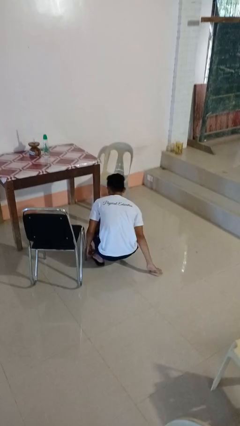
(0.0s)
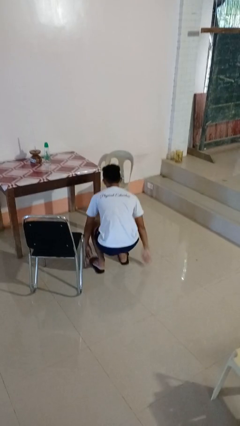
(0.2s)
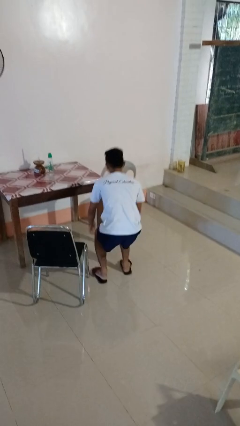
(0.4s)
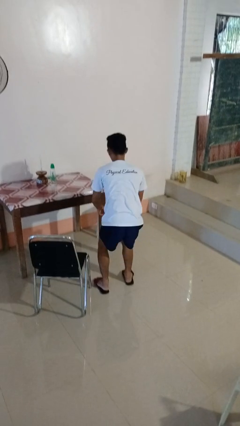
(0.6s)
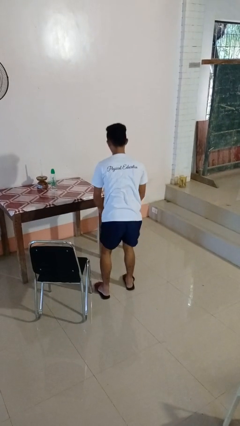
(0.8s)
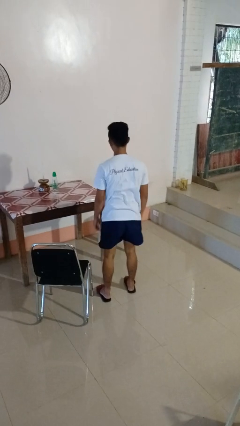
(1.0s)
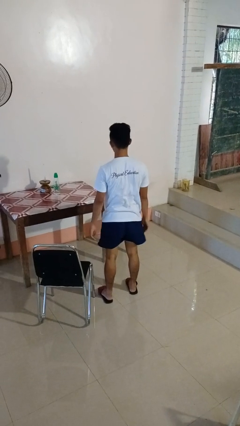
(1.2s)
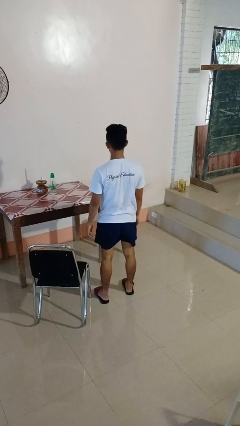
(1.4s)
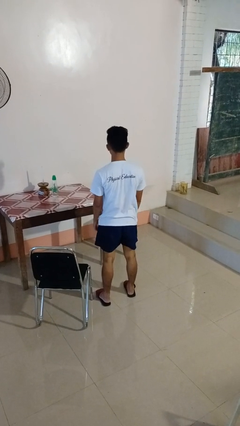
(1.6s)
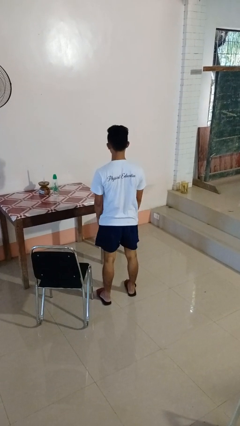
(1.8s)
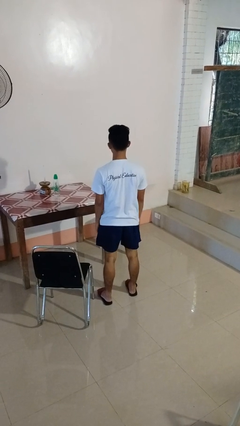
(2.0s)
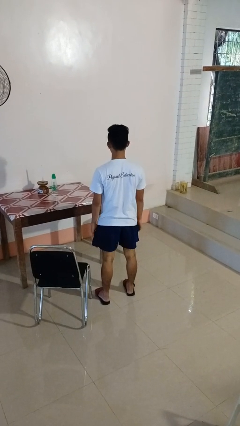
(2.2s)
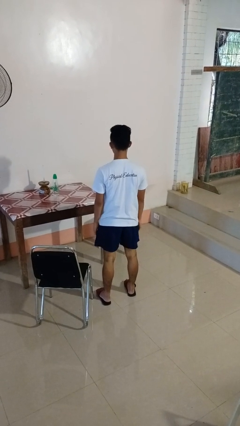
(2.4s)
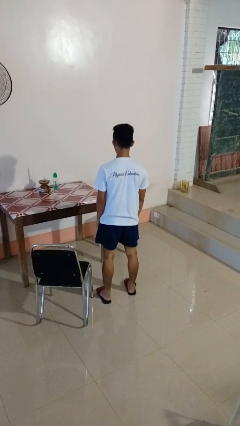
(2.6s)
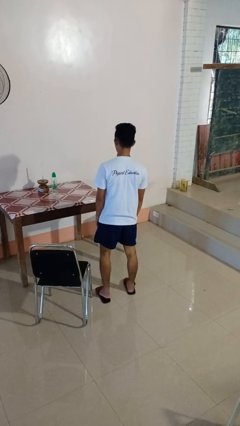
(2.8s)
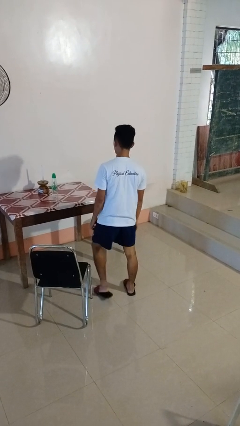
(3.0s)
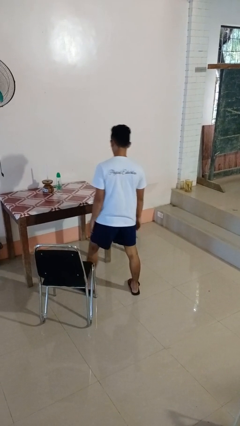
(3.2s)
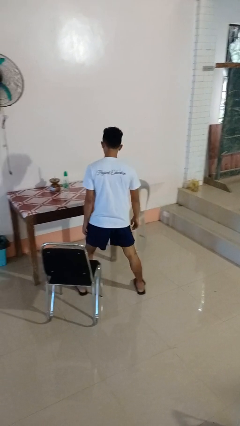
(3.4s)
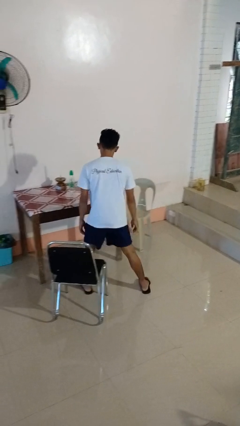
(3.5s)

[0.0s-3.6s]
person stands up from floor

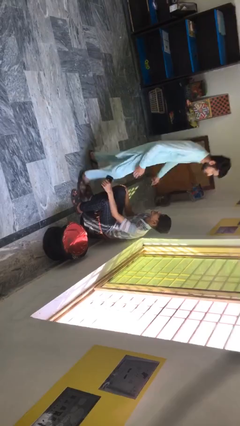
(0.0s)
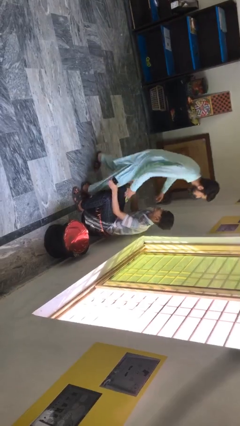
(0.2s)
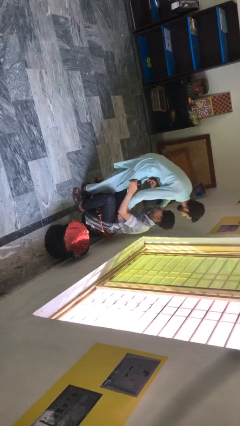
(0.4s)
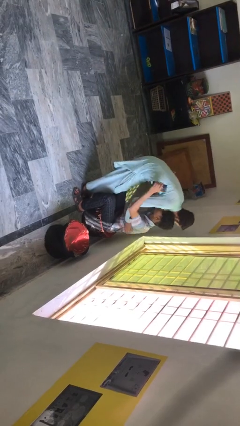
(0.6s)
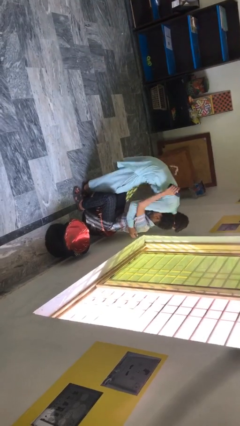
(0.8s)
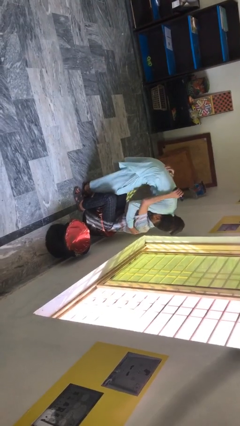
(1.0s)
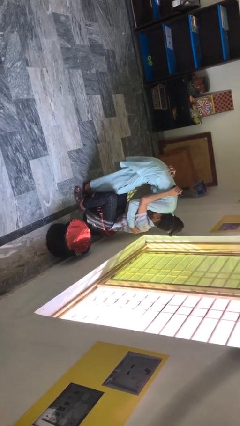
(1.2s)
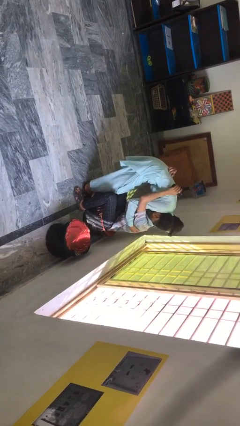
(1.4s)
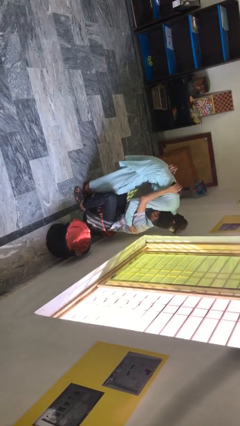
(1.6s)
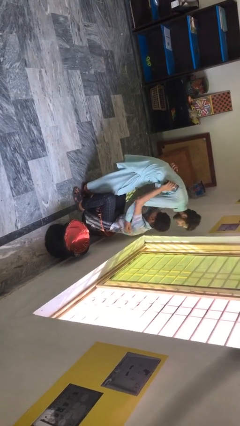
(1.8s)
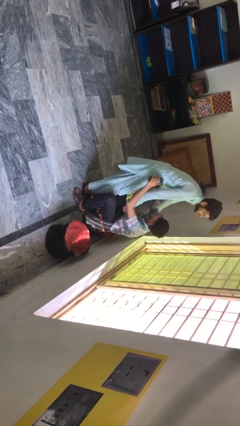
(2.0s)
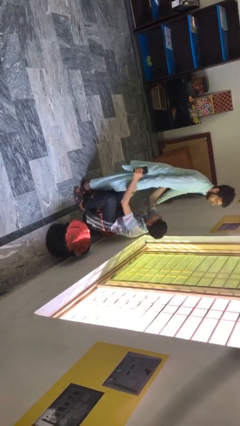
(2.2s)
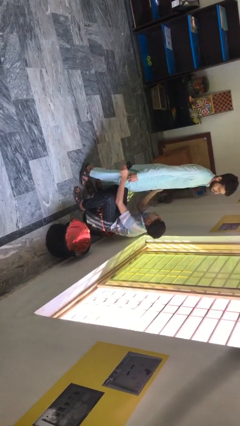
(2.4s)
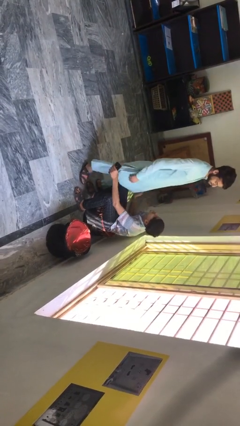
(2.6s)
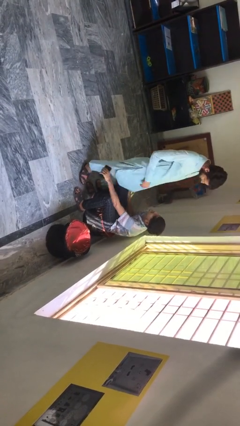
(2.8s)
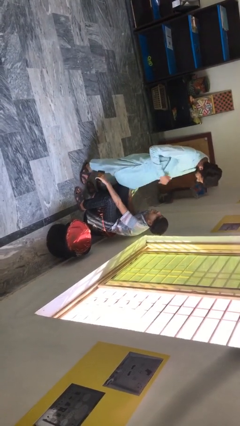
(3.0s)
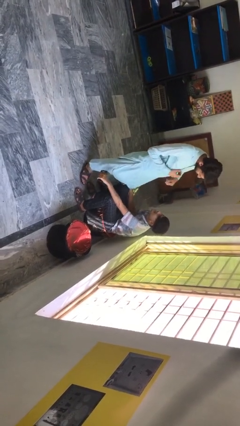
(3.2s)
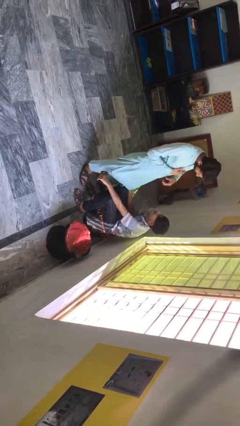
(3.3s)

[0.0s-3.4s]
person embraces person

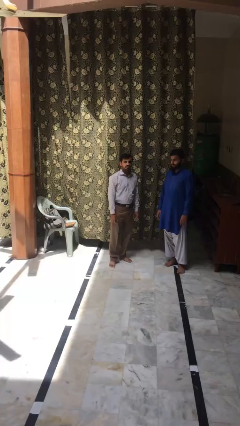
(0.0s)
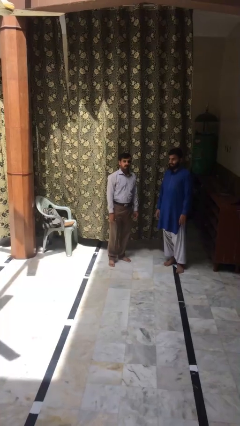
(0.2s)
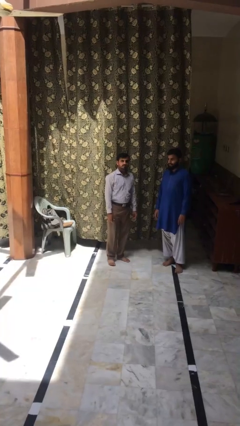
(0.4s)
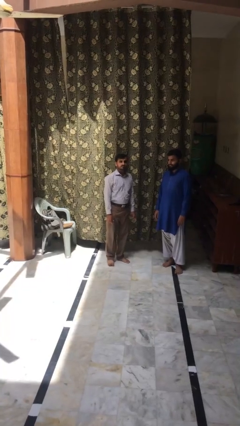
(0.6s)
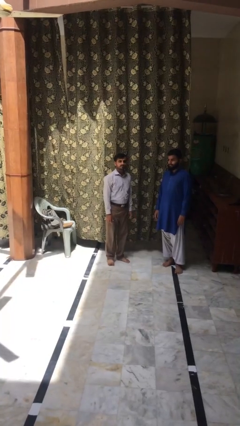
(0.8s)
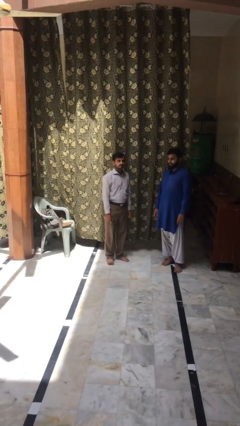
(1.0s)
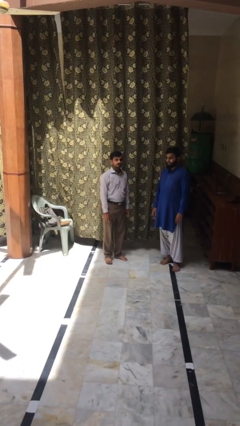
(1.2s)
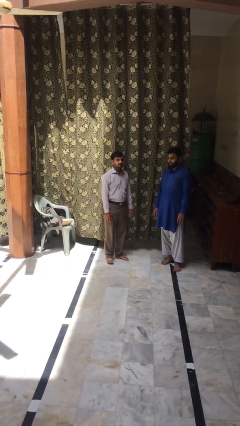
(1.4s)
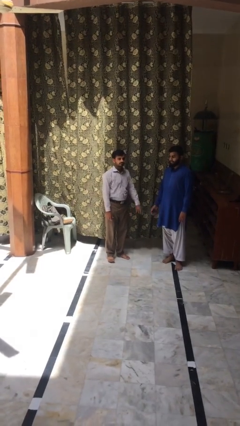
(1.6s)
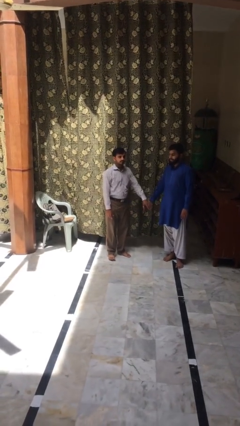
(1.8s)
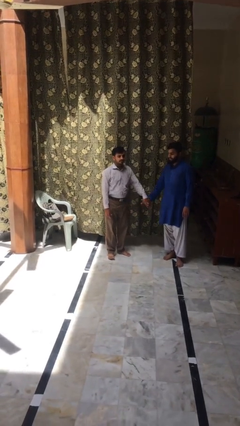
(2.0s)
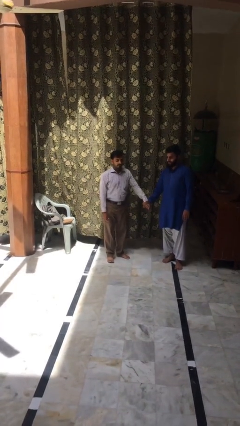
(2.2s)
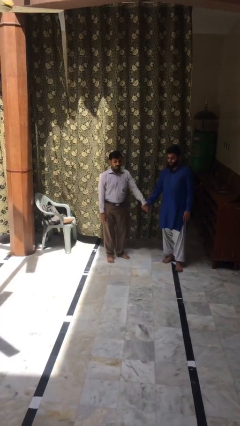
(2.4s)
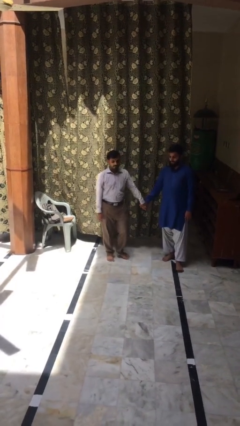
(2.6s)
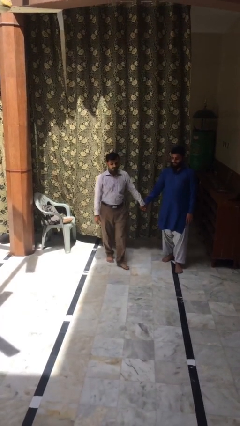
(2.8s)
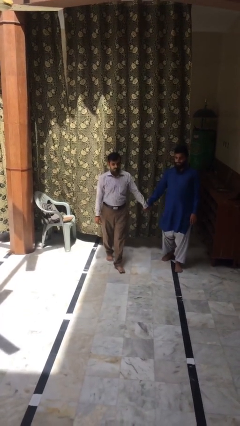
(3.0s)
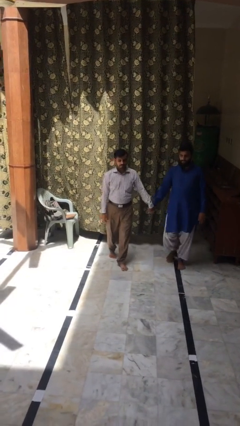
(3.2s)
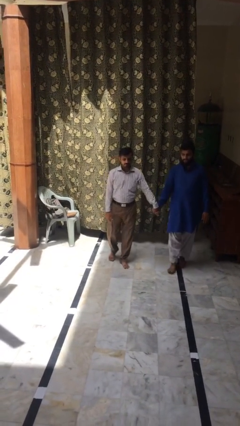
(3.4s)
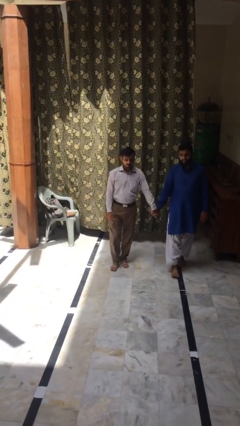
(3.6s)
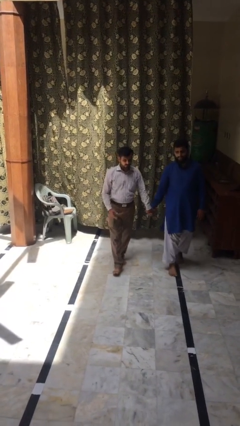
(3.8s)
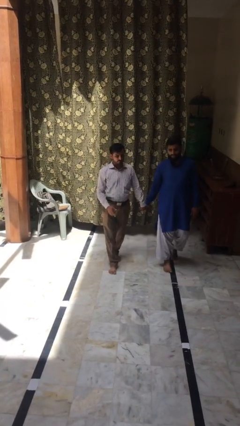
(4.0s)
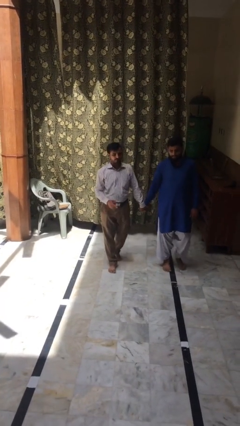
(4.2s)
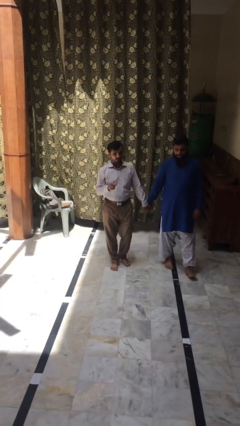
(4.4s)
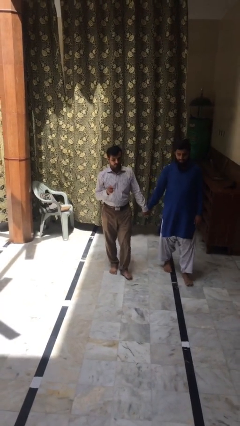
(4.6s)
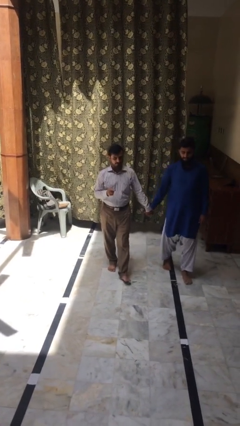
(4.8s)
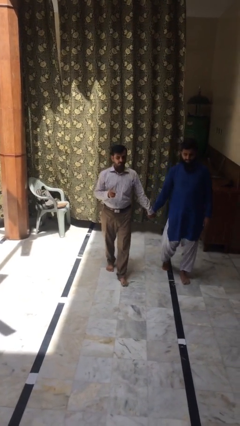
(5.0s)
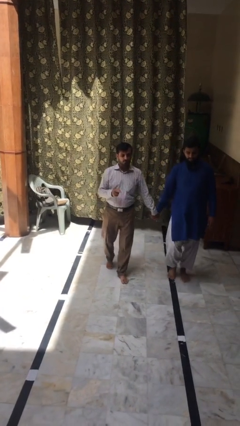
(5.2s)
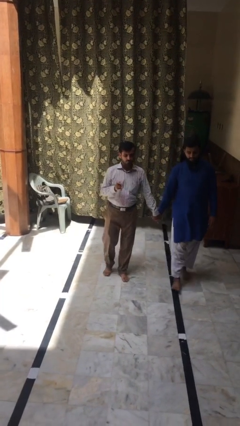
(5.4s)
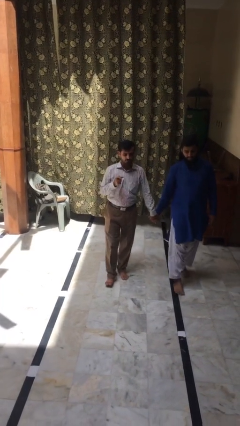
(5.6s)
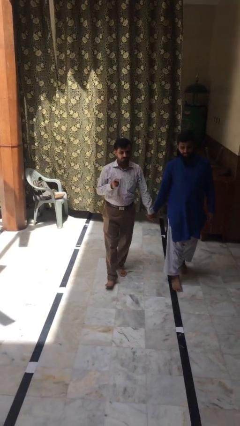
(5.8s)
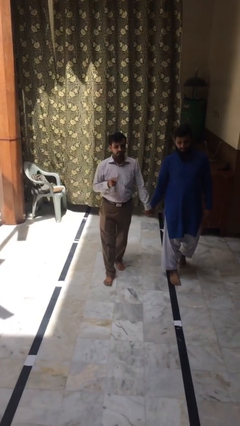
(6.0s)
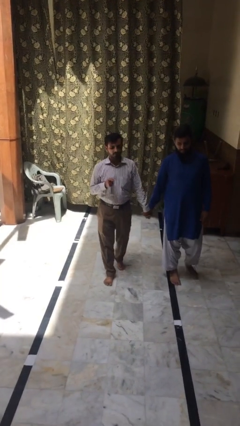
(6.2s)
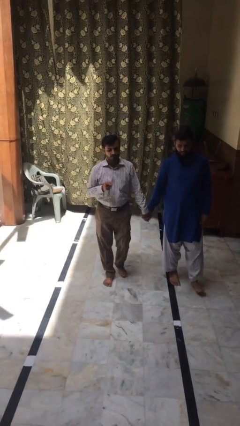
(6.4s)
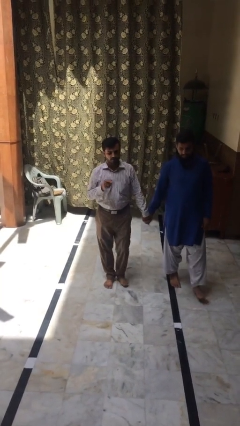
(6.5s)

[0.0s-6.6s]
person holds hand

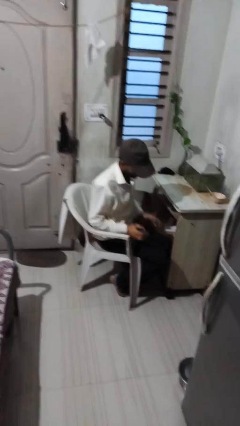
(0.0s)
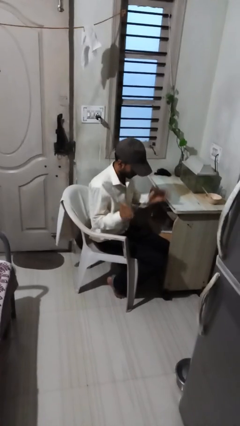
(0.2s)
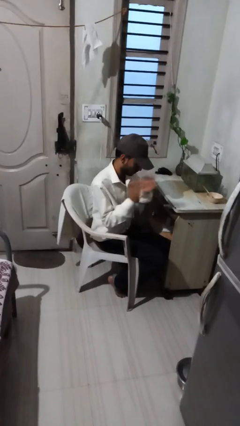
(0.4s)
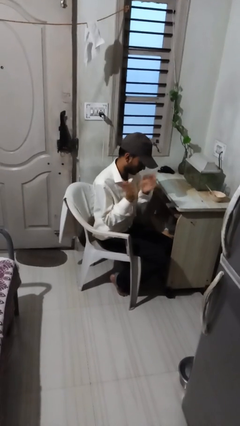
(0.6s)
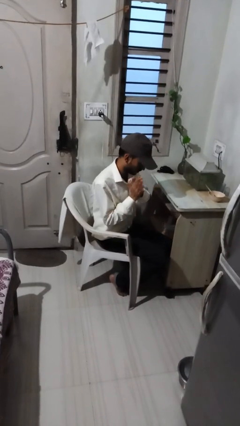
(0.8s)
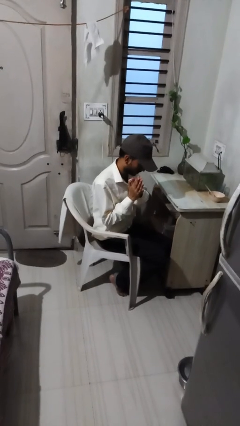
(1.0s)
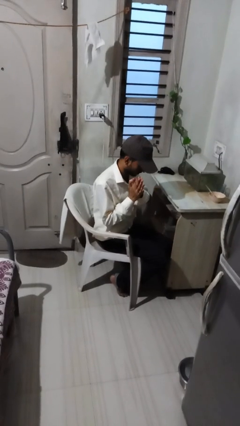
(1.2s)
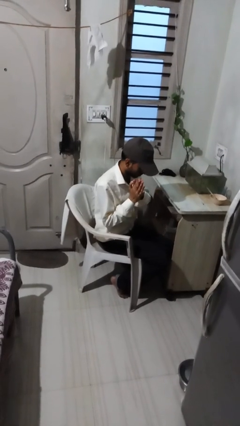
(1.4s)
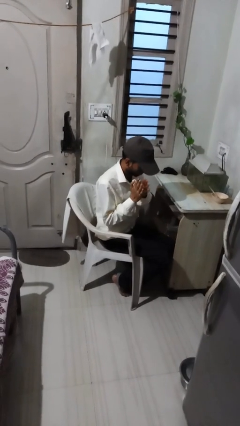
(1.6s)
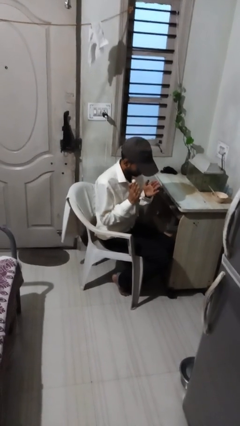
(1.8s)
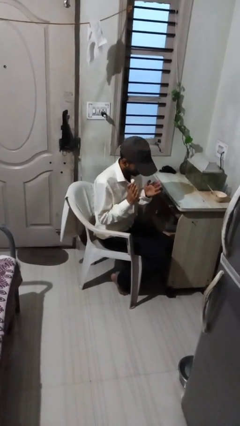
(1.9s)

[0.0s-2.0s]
person claps hands

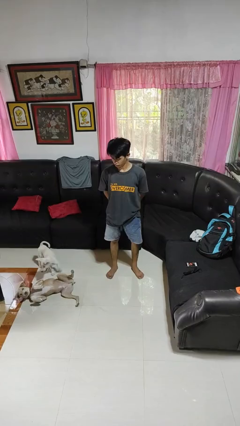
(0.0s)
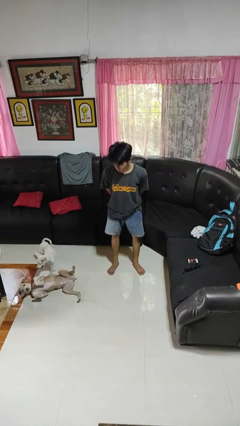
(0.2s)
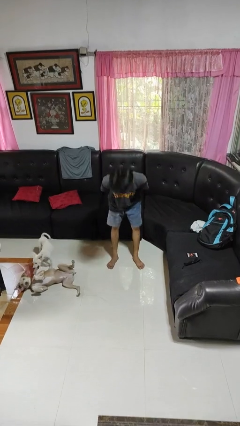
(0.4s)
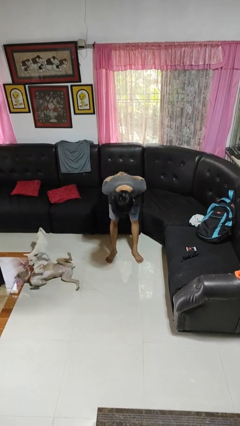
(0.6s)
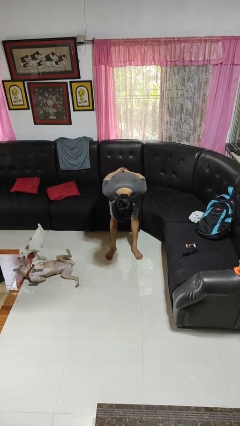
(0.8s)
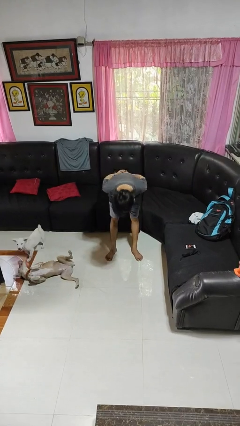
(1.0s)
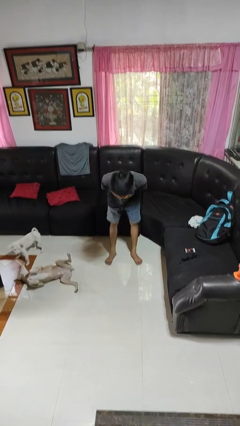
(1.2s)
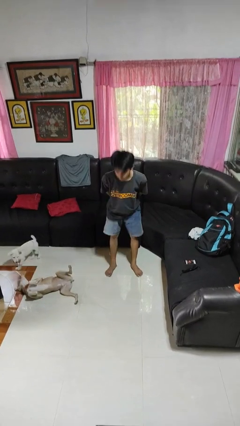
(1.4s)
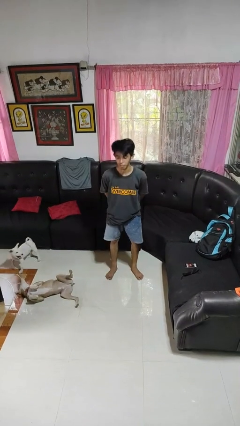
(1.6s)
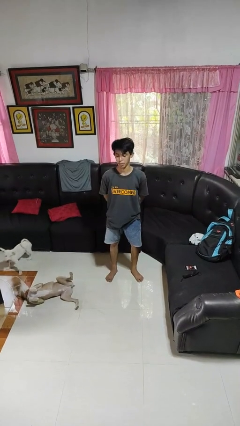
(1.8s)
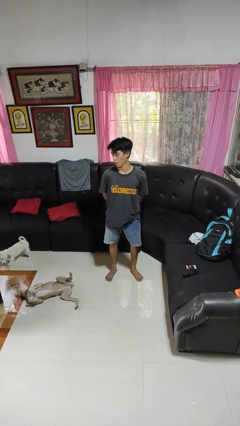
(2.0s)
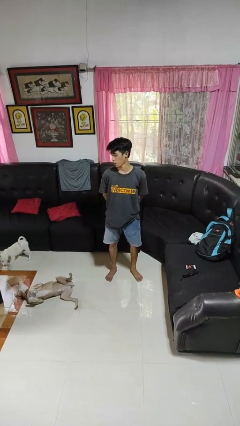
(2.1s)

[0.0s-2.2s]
person bows

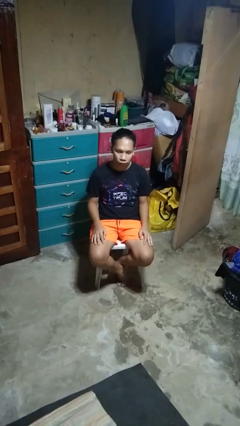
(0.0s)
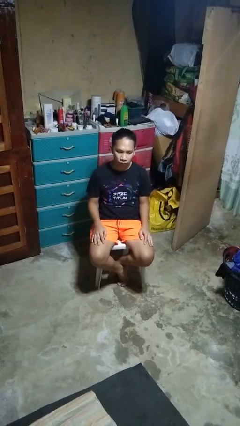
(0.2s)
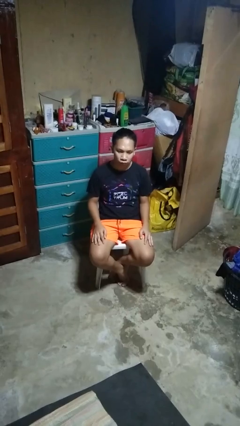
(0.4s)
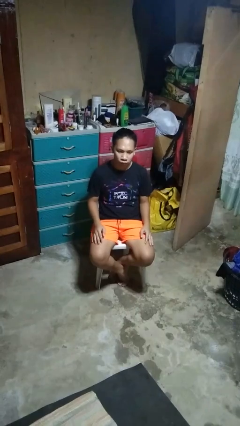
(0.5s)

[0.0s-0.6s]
person shrugs
